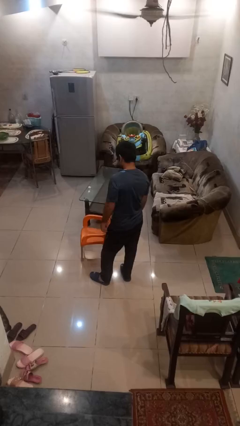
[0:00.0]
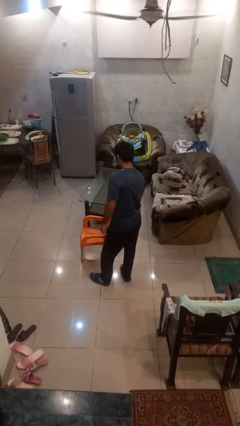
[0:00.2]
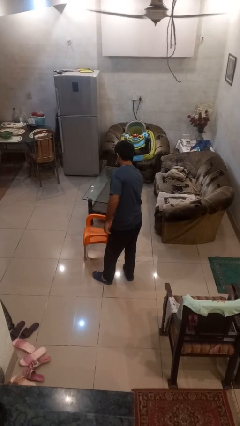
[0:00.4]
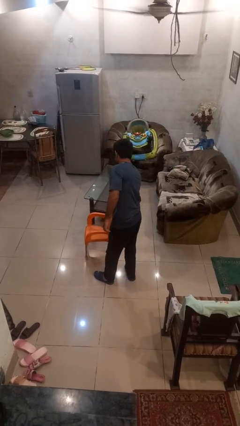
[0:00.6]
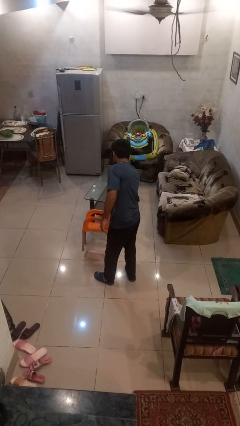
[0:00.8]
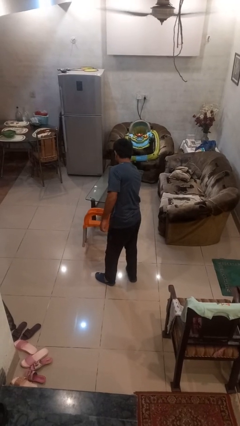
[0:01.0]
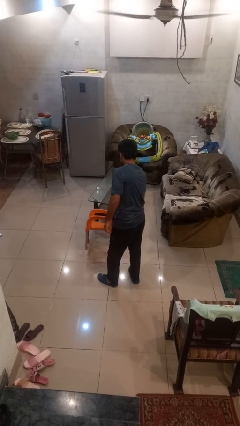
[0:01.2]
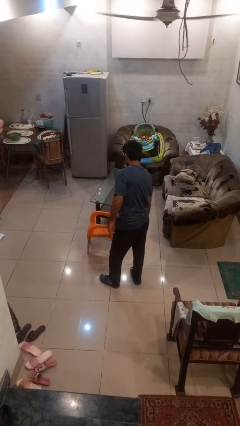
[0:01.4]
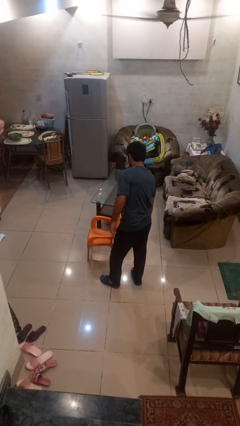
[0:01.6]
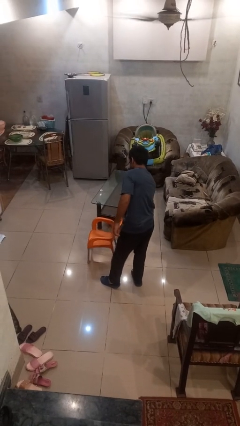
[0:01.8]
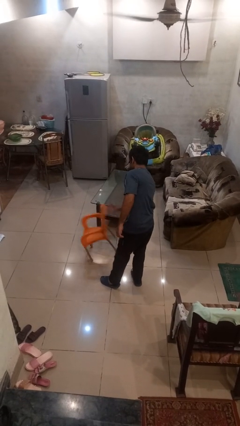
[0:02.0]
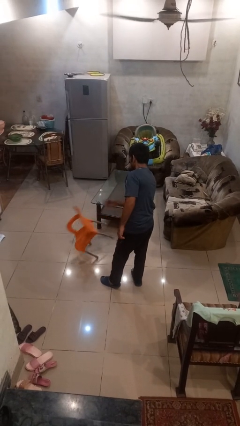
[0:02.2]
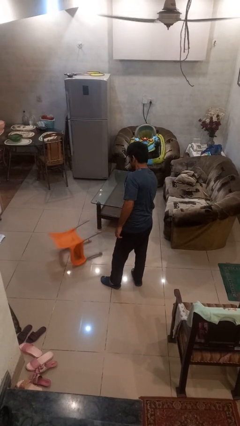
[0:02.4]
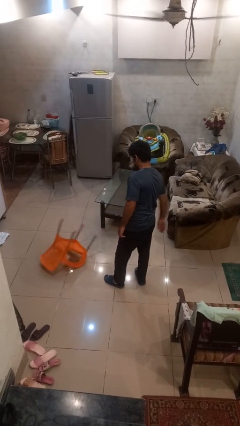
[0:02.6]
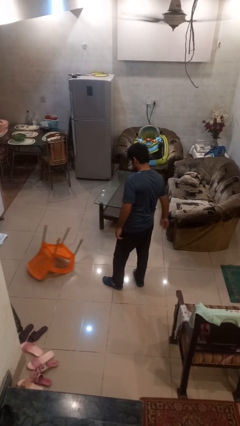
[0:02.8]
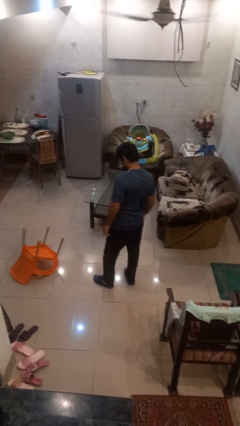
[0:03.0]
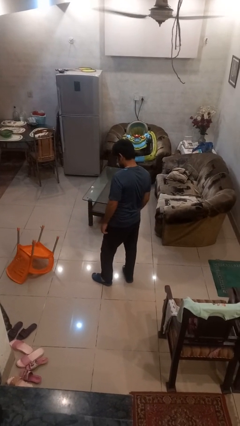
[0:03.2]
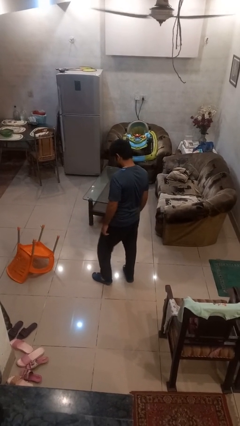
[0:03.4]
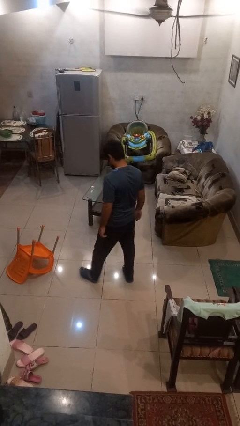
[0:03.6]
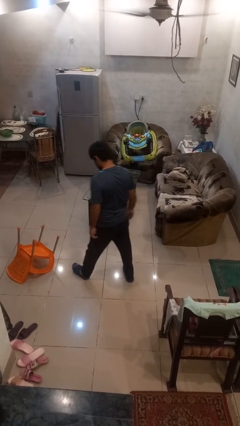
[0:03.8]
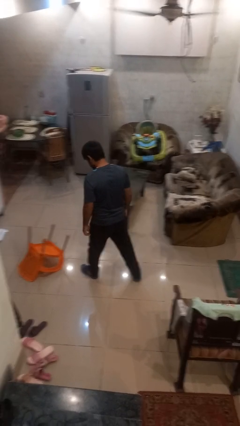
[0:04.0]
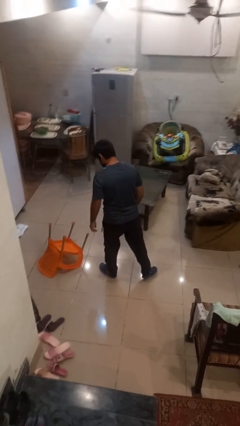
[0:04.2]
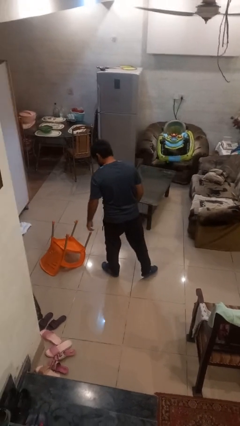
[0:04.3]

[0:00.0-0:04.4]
person knocks over furniture

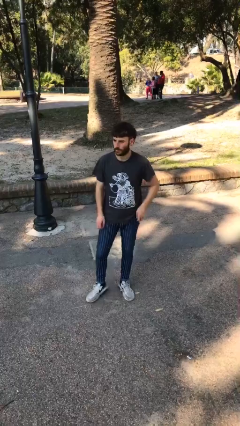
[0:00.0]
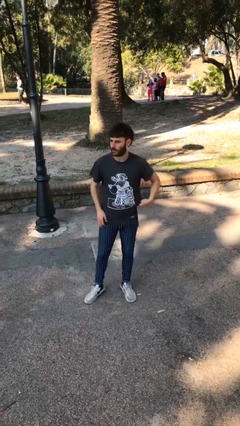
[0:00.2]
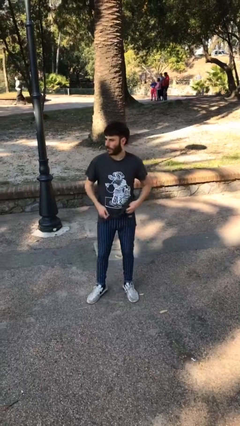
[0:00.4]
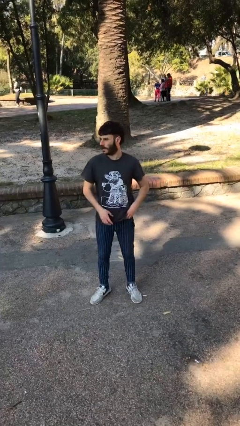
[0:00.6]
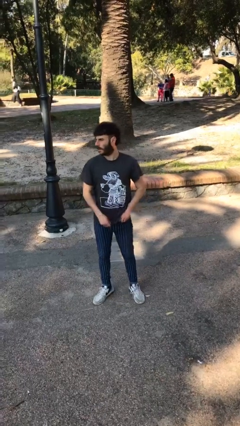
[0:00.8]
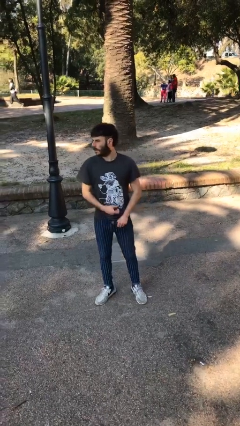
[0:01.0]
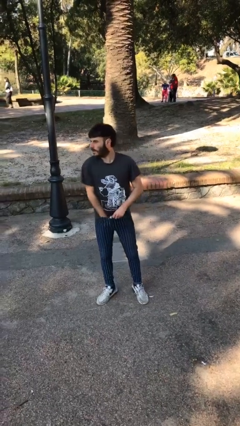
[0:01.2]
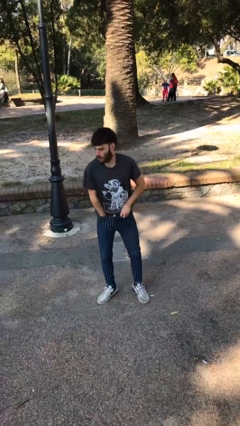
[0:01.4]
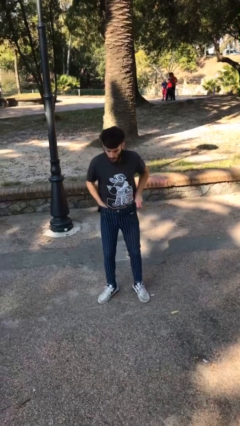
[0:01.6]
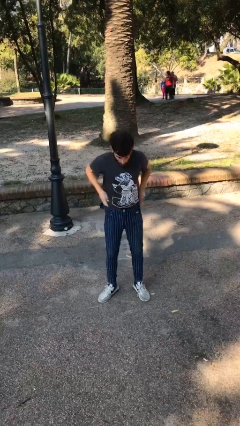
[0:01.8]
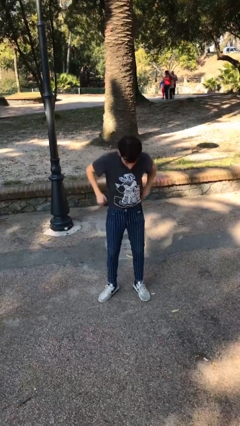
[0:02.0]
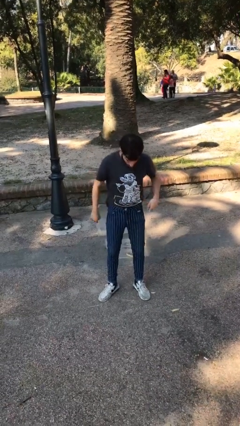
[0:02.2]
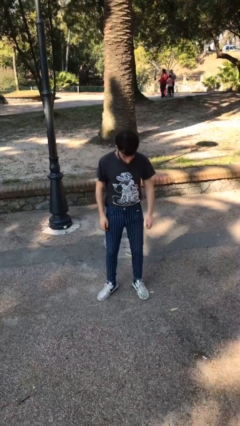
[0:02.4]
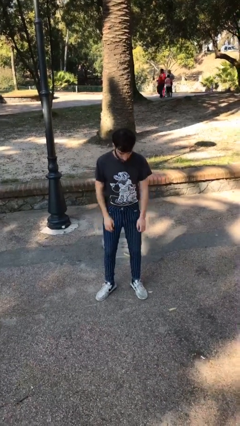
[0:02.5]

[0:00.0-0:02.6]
person tucks in shirt

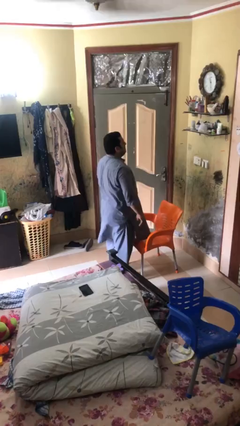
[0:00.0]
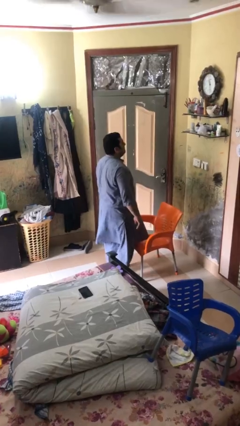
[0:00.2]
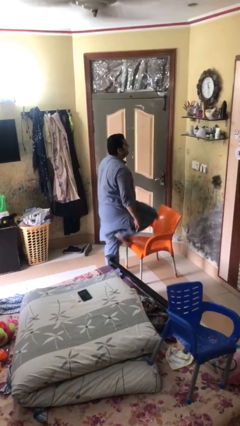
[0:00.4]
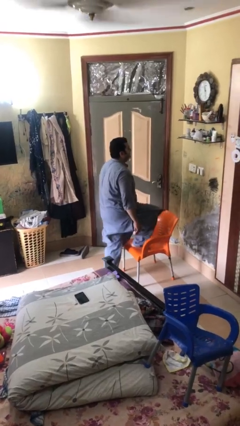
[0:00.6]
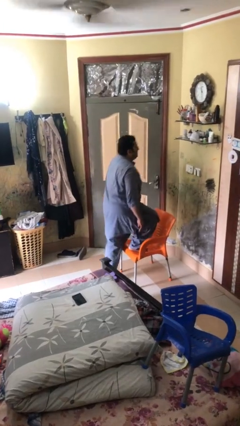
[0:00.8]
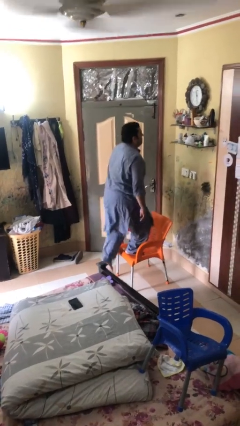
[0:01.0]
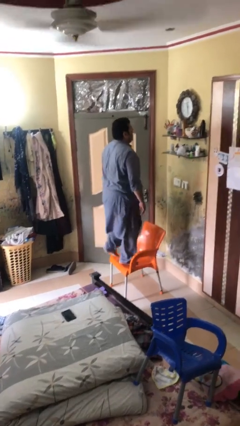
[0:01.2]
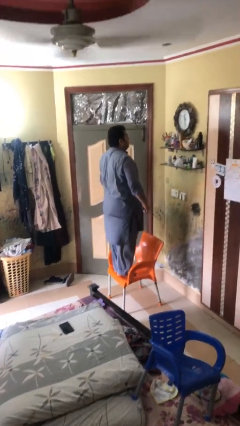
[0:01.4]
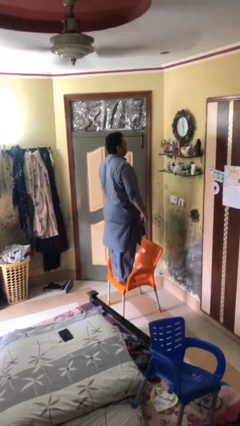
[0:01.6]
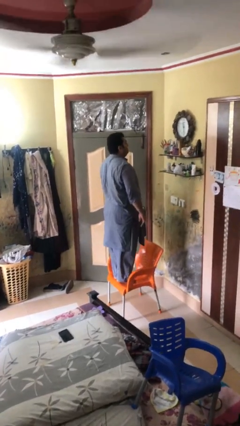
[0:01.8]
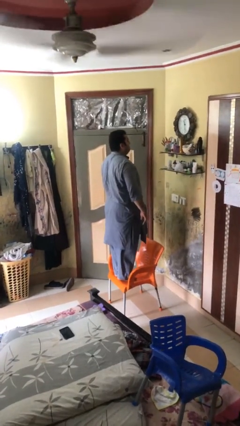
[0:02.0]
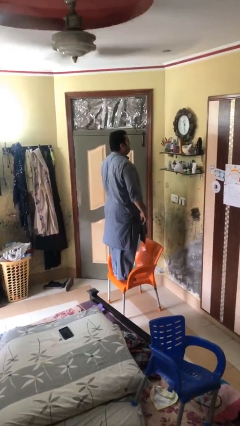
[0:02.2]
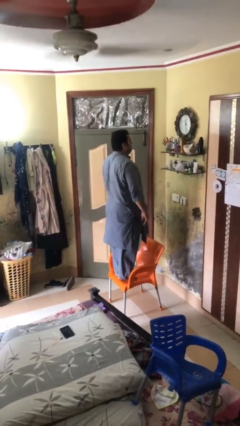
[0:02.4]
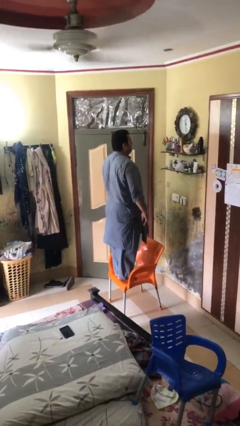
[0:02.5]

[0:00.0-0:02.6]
person climbs on chair

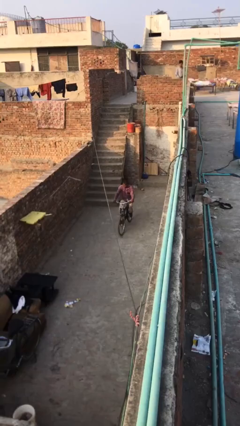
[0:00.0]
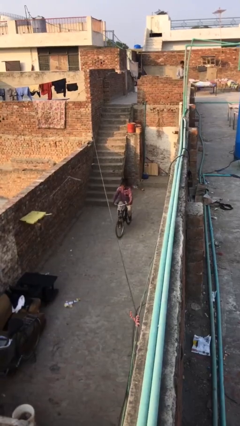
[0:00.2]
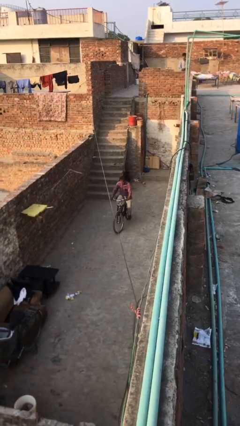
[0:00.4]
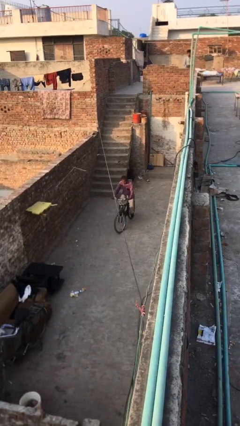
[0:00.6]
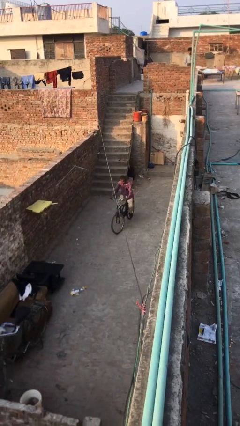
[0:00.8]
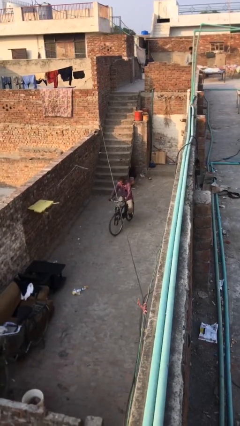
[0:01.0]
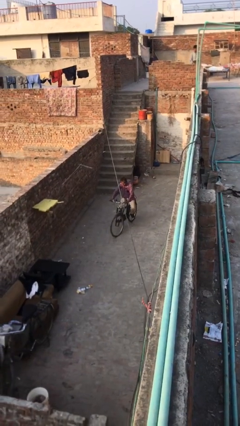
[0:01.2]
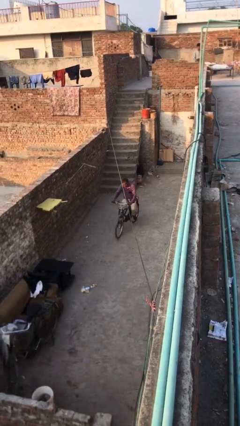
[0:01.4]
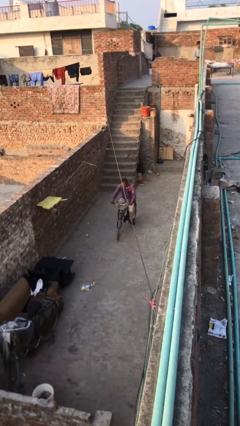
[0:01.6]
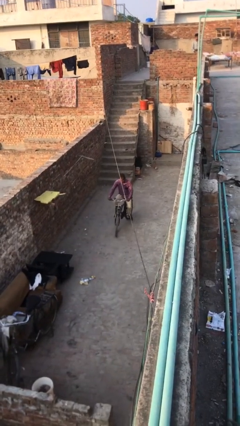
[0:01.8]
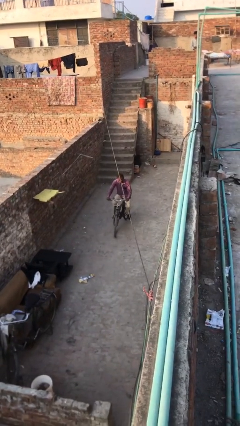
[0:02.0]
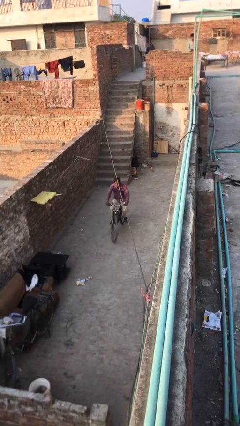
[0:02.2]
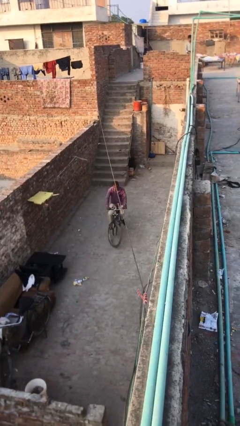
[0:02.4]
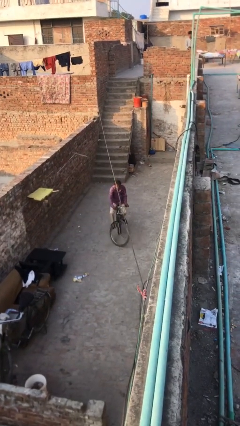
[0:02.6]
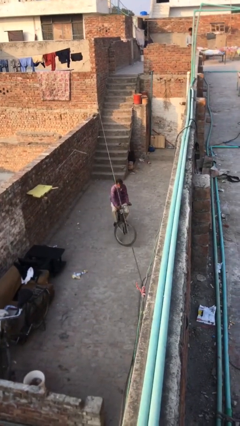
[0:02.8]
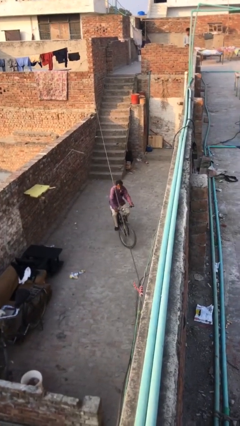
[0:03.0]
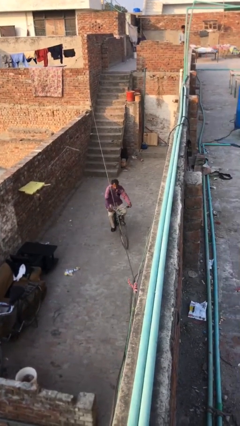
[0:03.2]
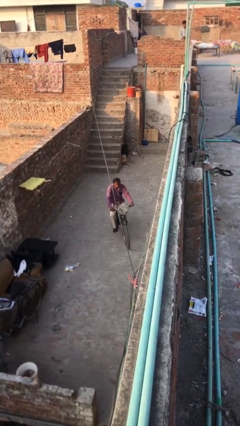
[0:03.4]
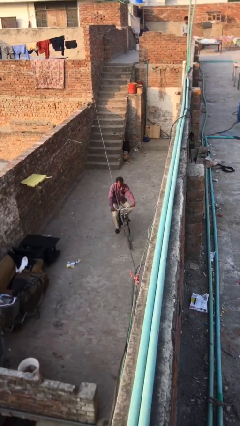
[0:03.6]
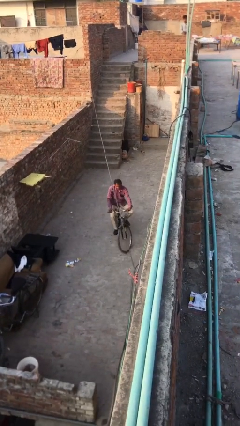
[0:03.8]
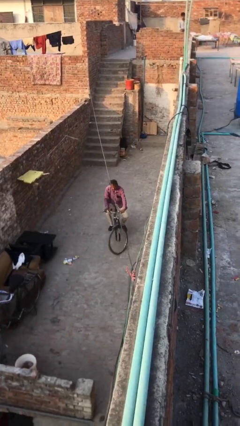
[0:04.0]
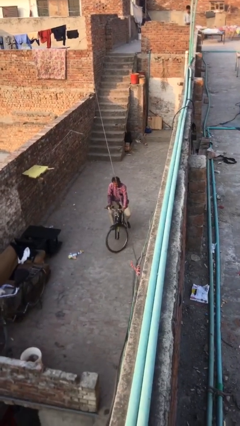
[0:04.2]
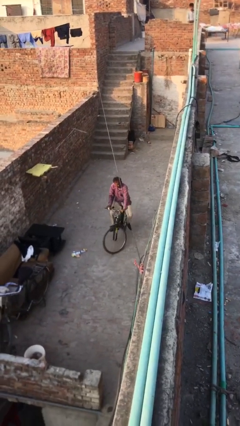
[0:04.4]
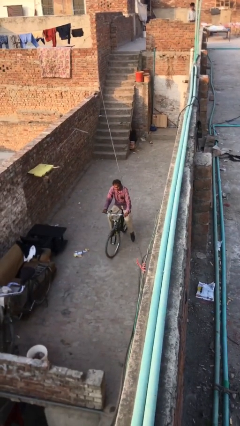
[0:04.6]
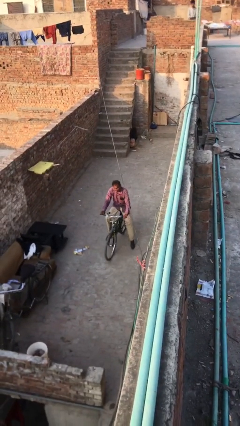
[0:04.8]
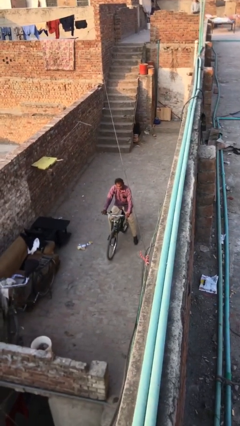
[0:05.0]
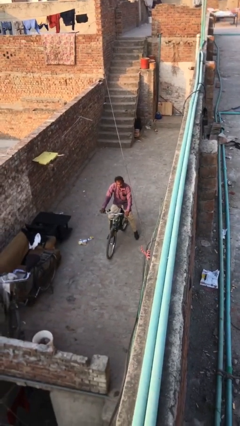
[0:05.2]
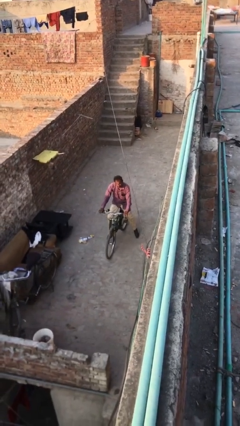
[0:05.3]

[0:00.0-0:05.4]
person rides bicycle

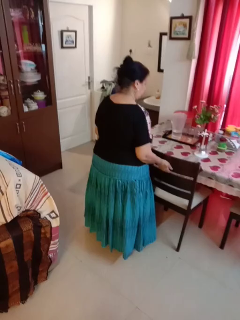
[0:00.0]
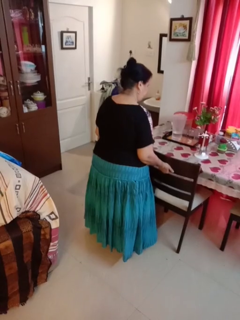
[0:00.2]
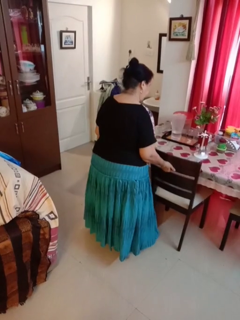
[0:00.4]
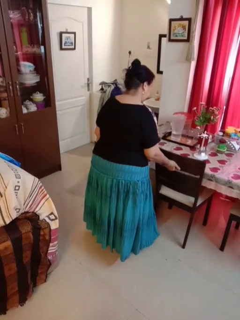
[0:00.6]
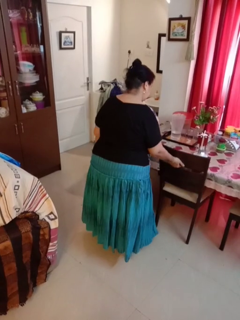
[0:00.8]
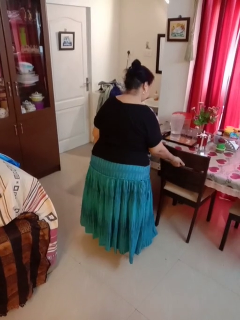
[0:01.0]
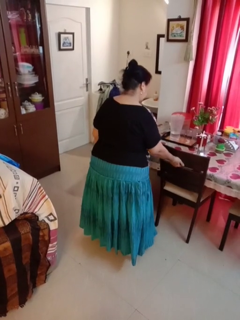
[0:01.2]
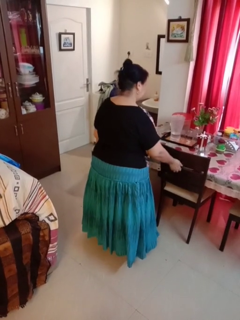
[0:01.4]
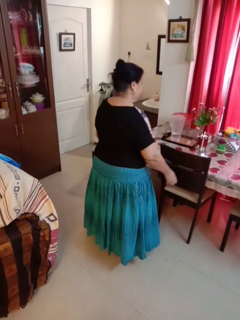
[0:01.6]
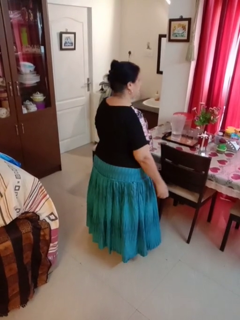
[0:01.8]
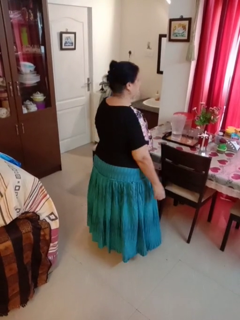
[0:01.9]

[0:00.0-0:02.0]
person pushes in chair

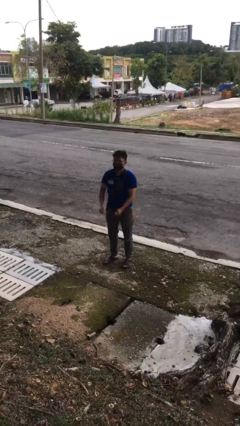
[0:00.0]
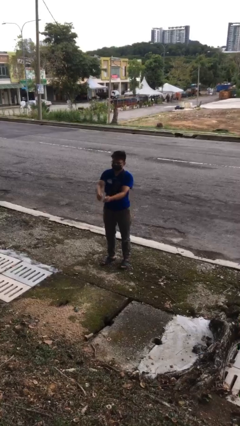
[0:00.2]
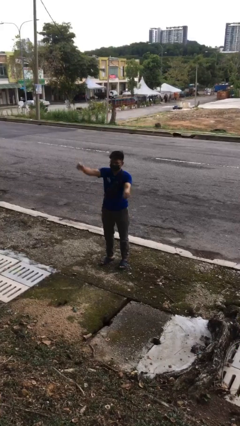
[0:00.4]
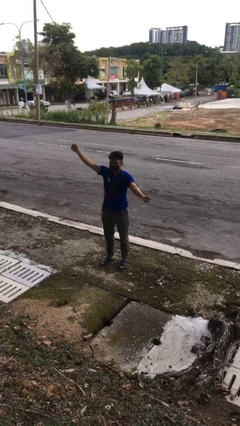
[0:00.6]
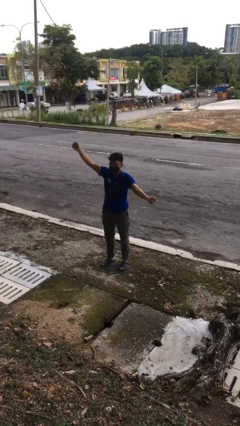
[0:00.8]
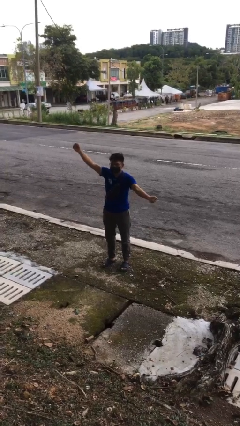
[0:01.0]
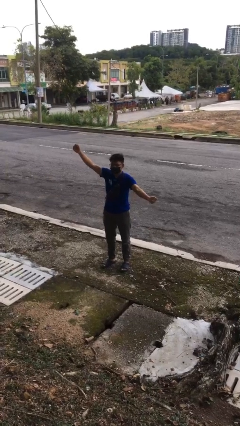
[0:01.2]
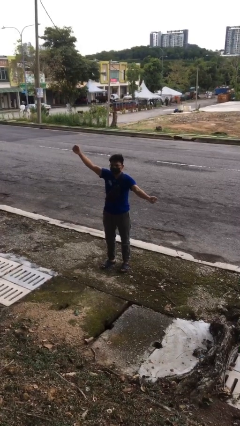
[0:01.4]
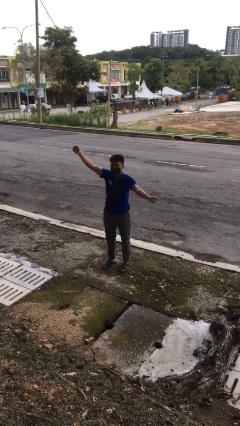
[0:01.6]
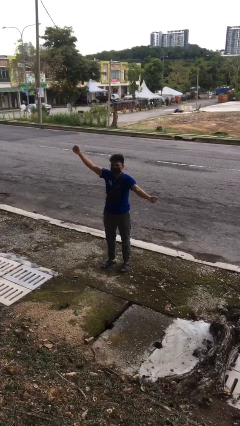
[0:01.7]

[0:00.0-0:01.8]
person gestures zoom in
